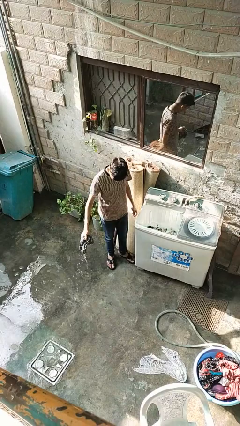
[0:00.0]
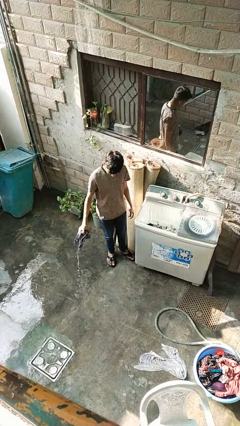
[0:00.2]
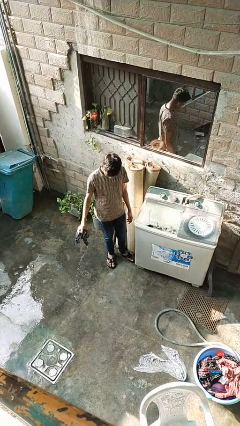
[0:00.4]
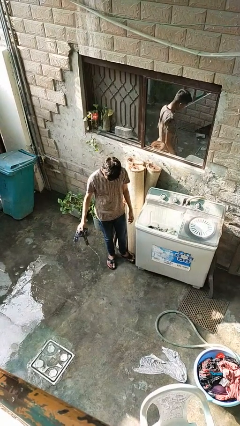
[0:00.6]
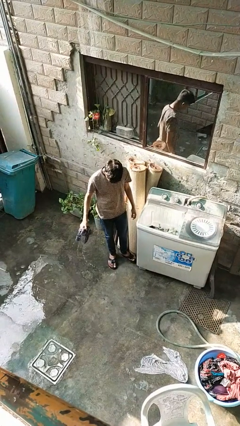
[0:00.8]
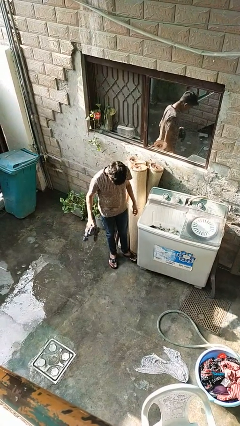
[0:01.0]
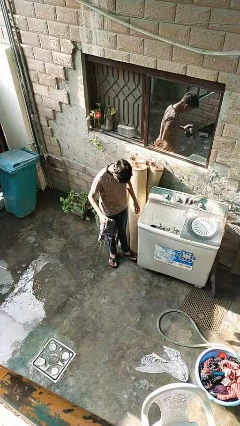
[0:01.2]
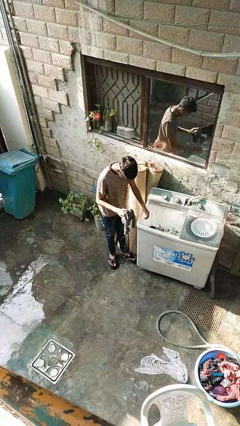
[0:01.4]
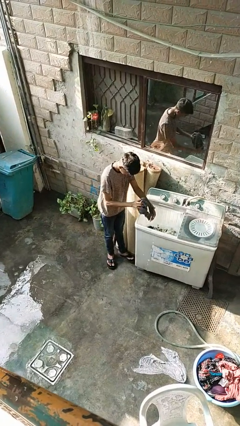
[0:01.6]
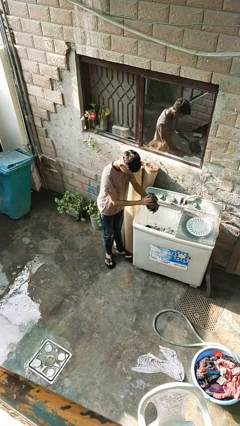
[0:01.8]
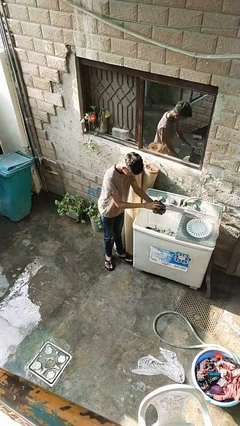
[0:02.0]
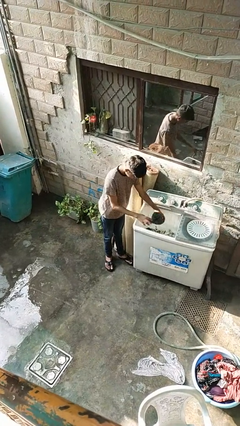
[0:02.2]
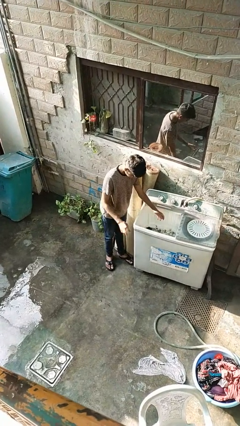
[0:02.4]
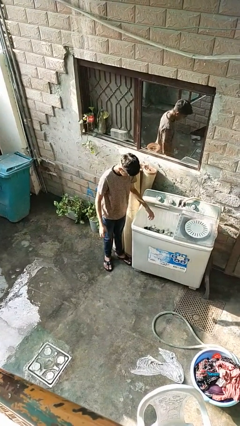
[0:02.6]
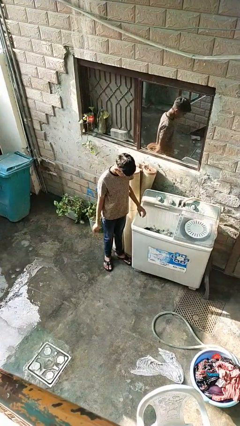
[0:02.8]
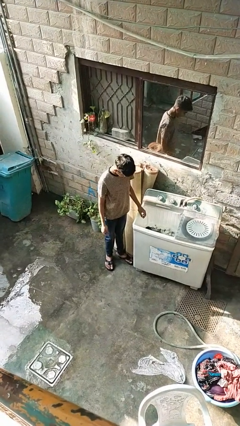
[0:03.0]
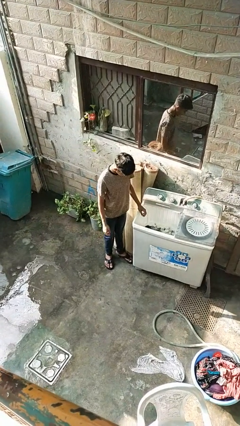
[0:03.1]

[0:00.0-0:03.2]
person loads clotheswasher

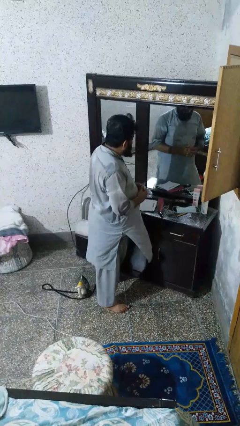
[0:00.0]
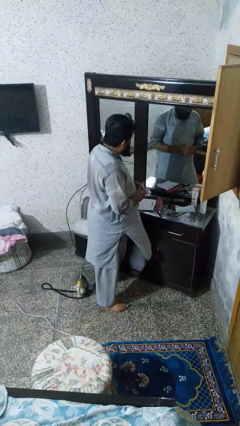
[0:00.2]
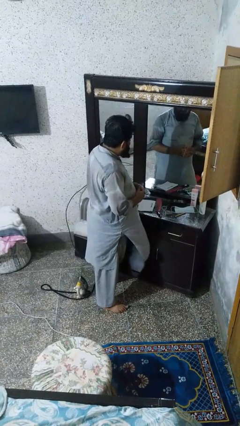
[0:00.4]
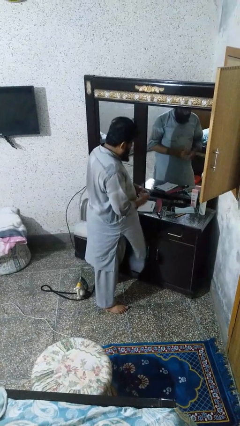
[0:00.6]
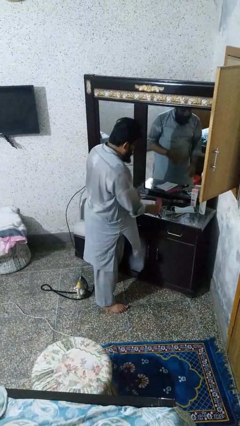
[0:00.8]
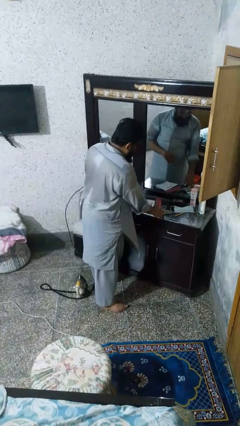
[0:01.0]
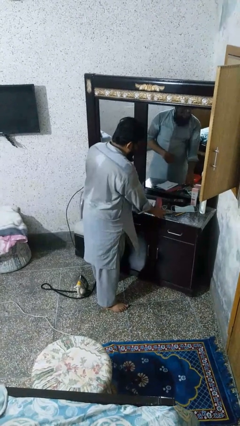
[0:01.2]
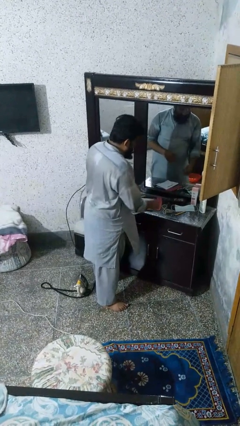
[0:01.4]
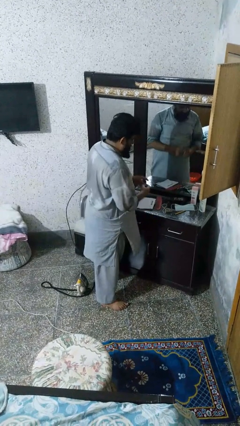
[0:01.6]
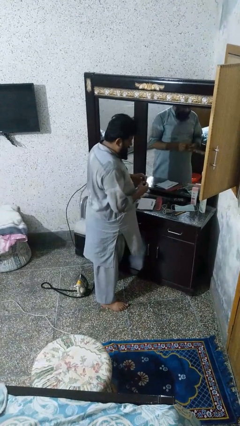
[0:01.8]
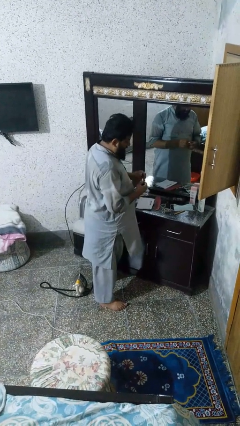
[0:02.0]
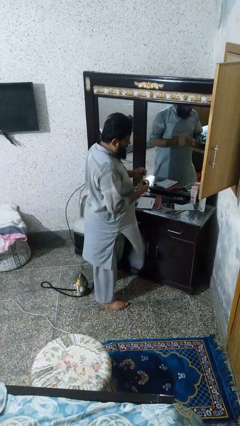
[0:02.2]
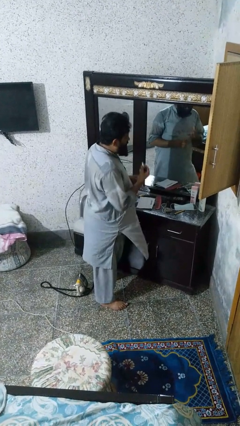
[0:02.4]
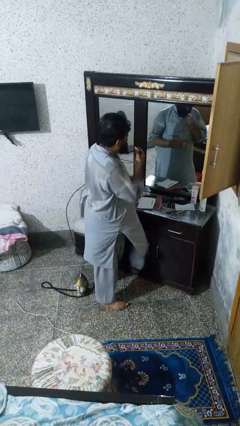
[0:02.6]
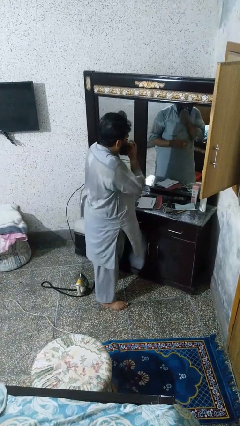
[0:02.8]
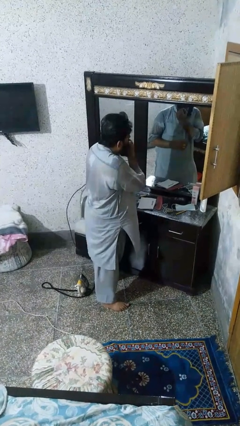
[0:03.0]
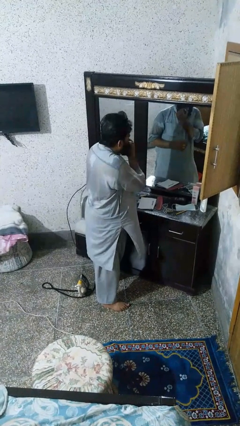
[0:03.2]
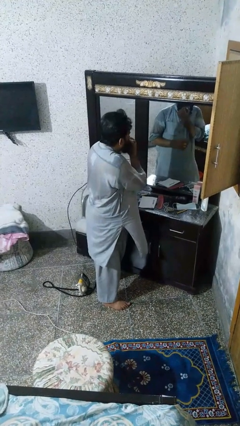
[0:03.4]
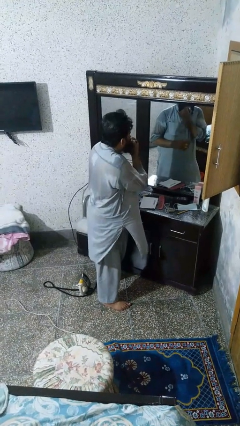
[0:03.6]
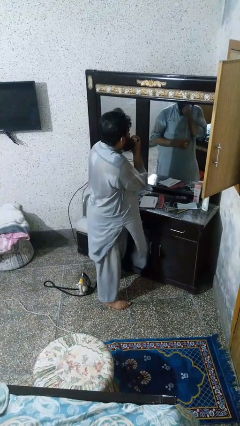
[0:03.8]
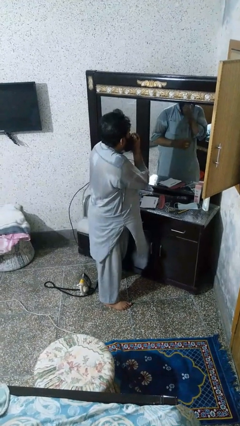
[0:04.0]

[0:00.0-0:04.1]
person applies lip makeup

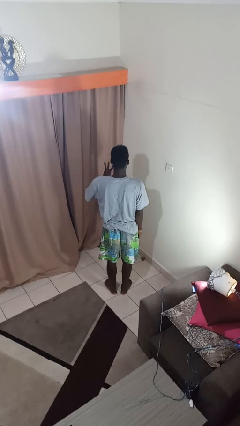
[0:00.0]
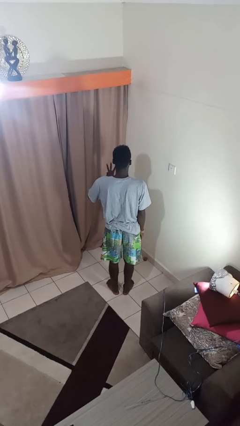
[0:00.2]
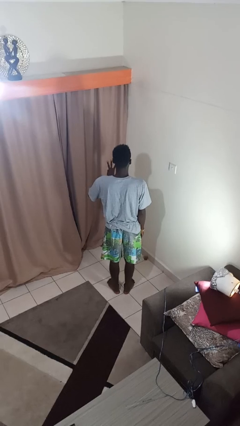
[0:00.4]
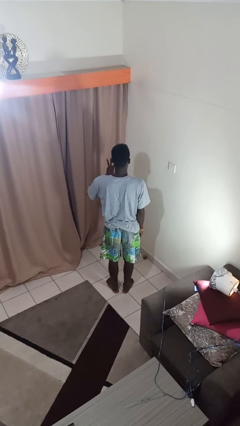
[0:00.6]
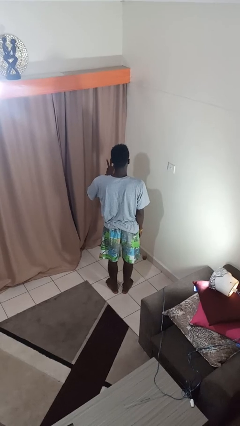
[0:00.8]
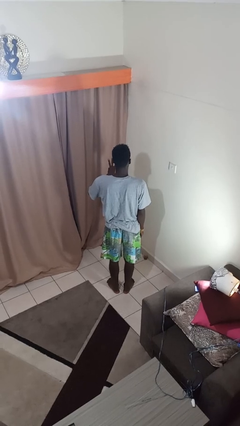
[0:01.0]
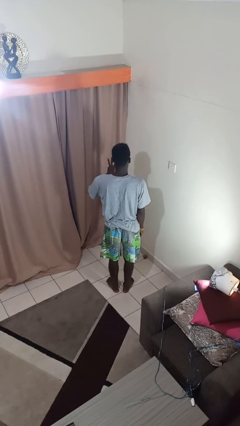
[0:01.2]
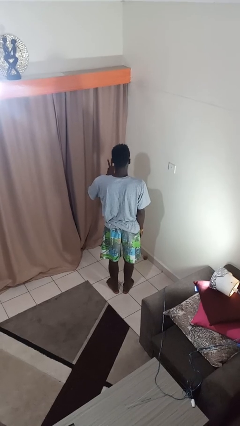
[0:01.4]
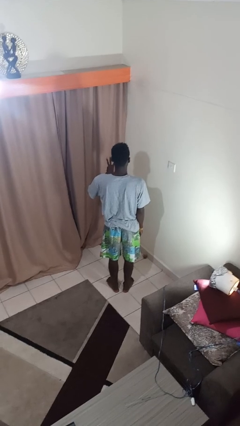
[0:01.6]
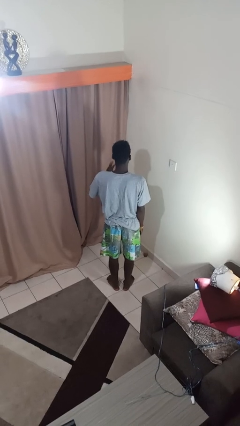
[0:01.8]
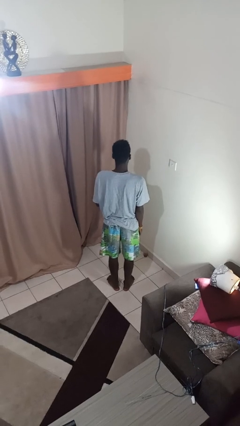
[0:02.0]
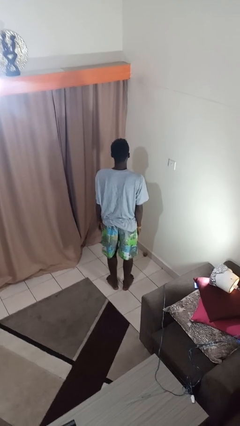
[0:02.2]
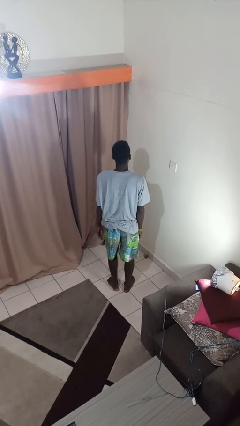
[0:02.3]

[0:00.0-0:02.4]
person gestures number three

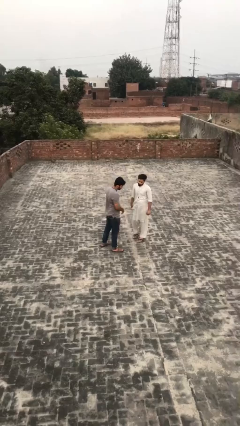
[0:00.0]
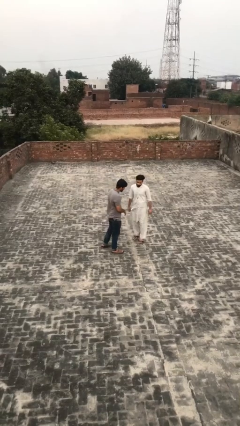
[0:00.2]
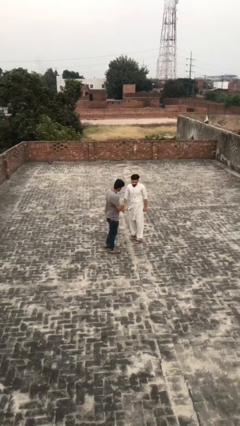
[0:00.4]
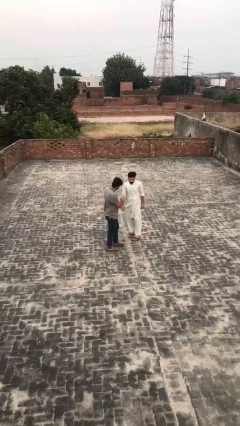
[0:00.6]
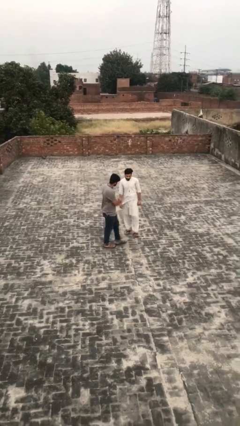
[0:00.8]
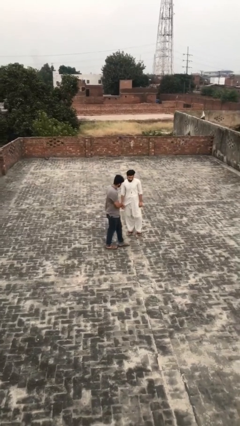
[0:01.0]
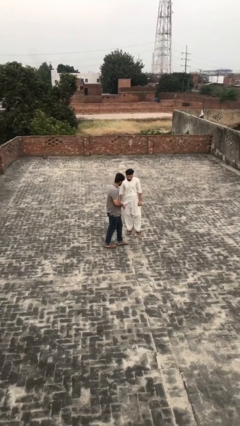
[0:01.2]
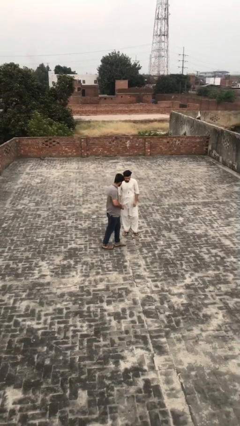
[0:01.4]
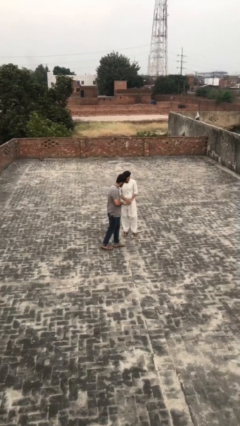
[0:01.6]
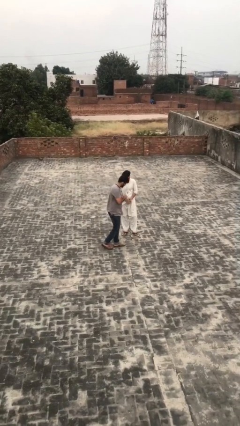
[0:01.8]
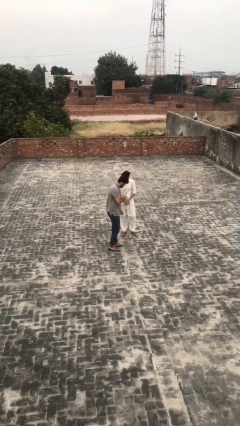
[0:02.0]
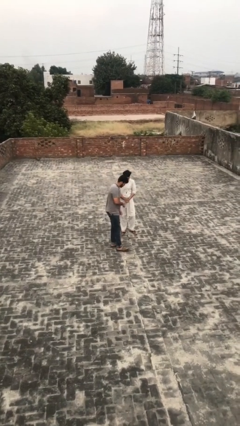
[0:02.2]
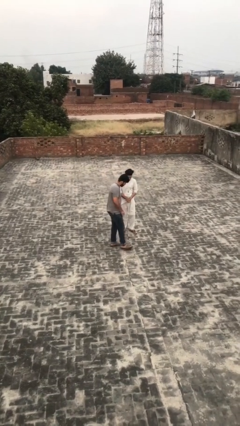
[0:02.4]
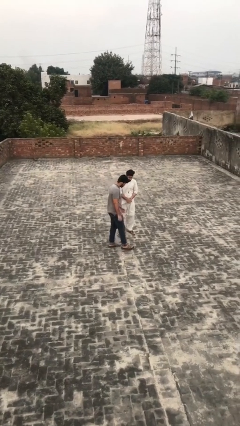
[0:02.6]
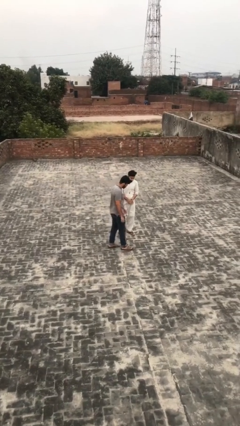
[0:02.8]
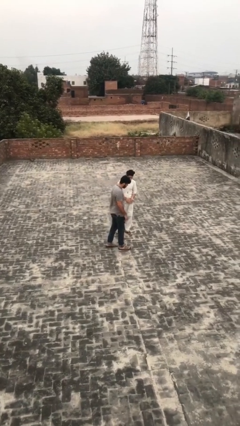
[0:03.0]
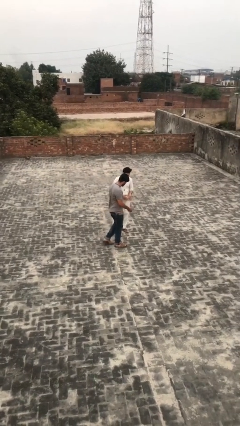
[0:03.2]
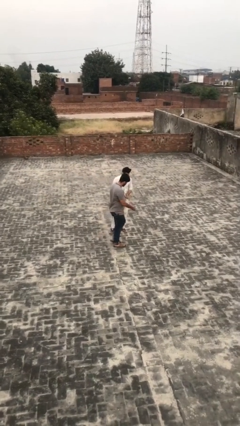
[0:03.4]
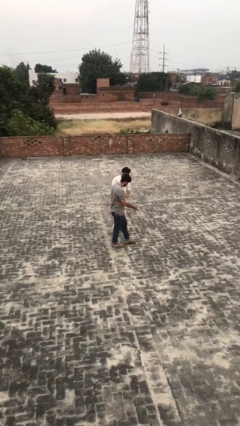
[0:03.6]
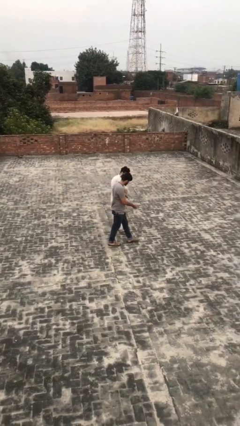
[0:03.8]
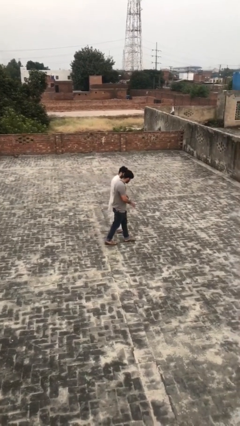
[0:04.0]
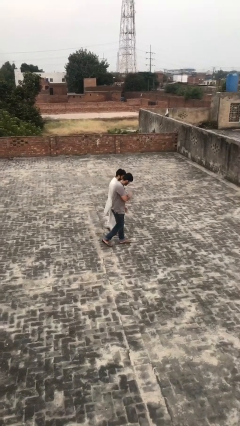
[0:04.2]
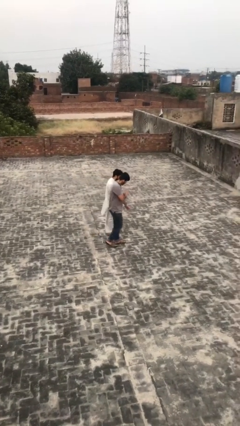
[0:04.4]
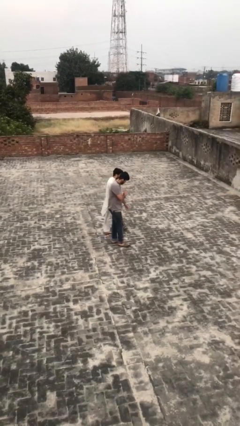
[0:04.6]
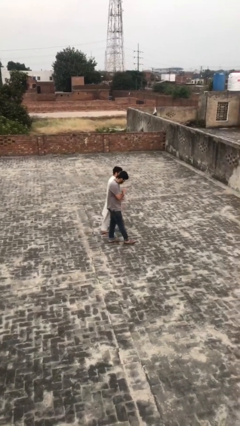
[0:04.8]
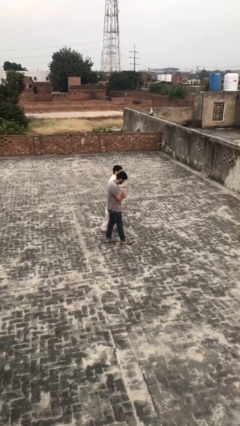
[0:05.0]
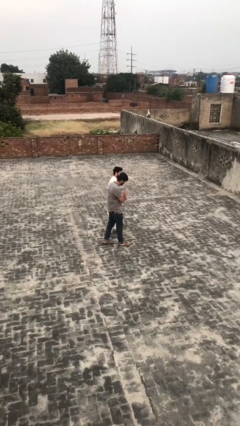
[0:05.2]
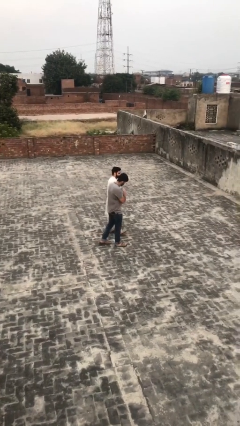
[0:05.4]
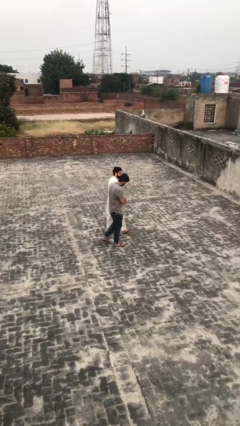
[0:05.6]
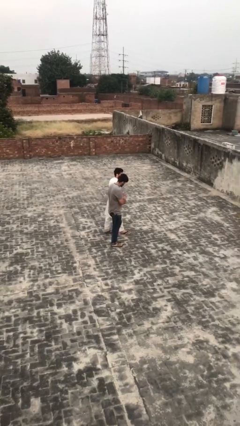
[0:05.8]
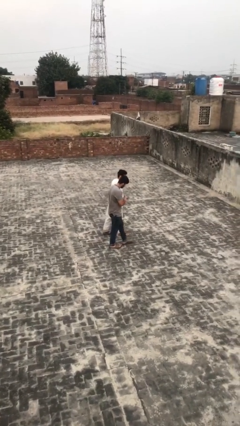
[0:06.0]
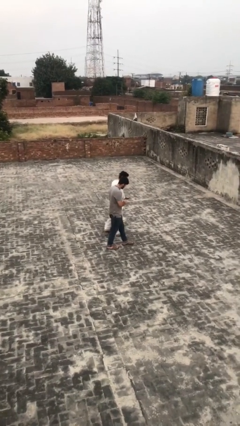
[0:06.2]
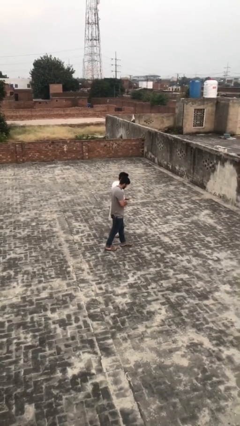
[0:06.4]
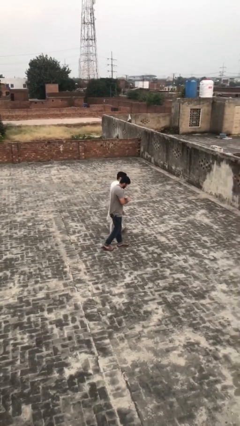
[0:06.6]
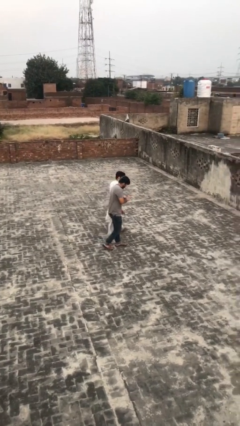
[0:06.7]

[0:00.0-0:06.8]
person talks to person

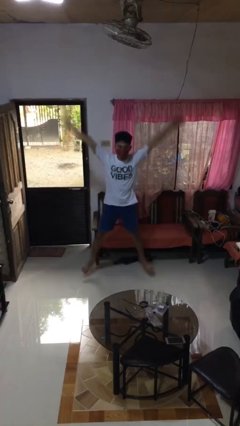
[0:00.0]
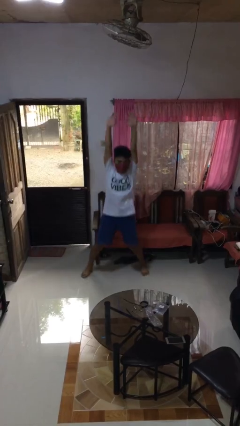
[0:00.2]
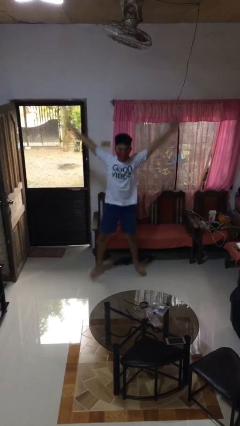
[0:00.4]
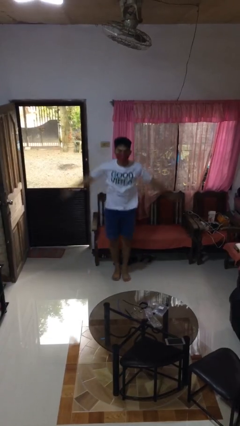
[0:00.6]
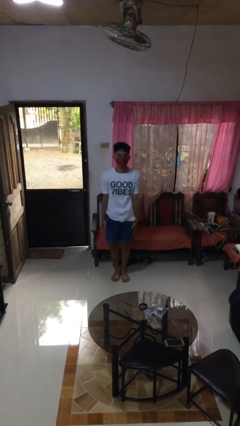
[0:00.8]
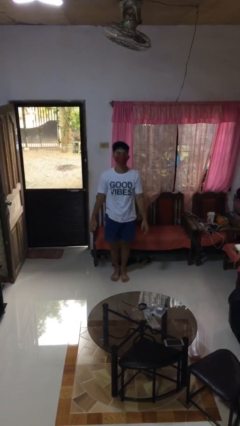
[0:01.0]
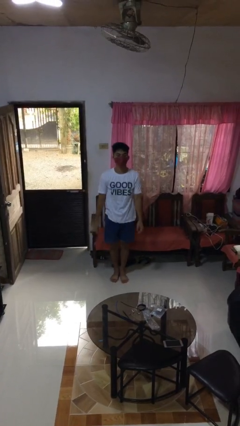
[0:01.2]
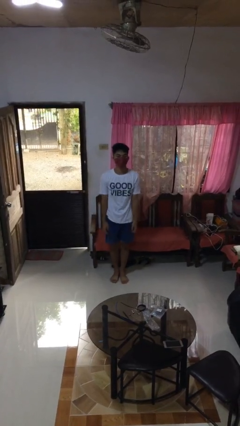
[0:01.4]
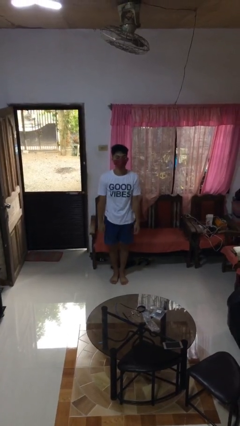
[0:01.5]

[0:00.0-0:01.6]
person exercises with jumping jacks
